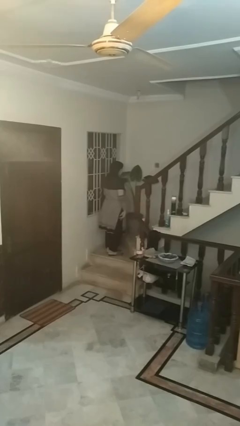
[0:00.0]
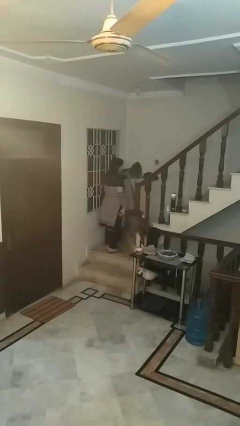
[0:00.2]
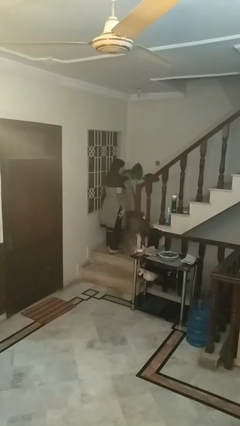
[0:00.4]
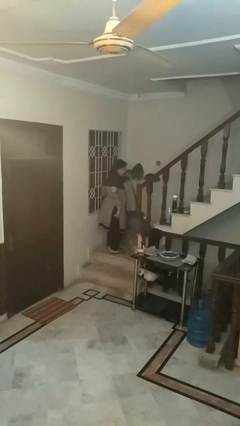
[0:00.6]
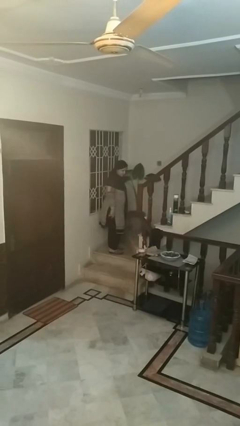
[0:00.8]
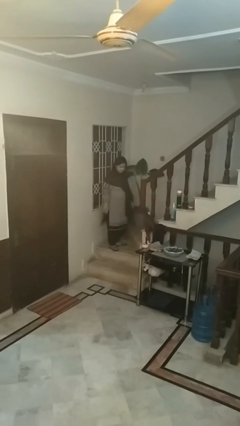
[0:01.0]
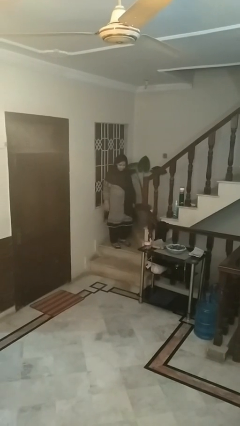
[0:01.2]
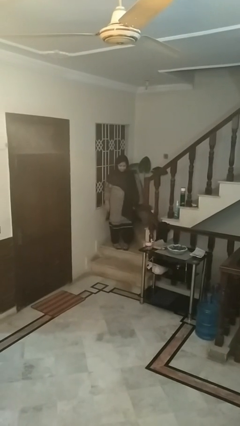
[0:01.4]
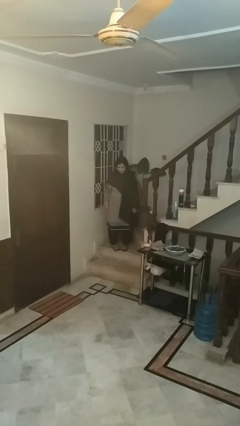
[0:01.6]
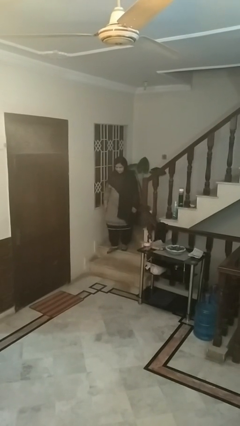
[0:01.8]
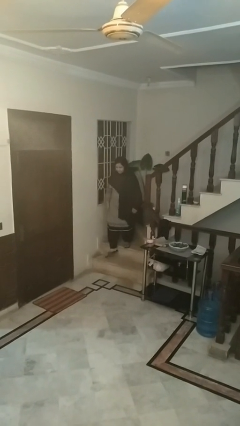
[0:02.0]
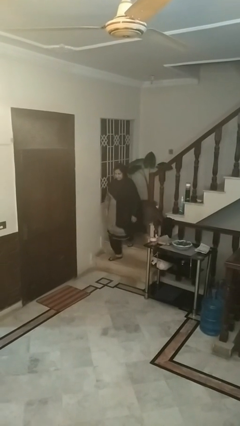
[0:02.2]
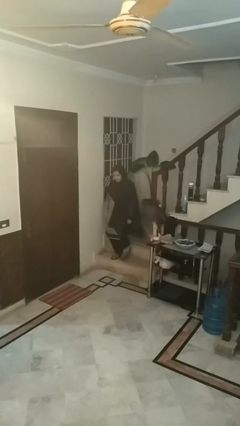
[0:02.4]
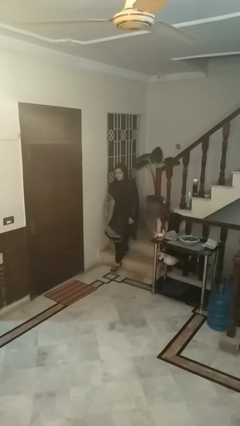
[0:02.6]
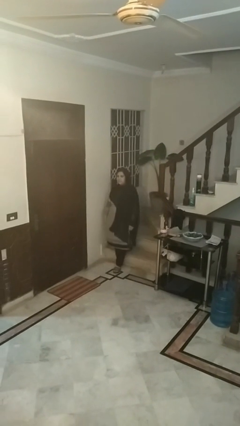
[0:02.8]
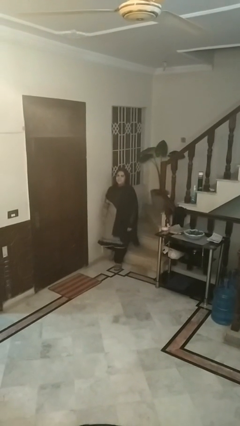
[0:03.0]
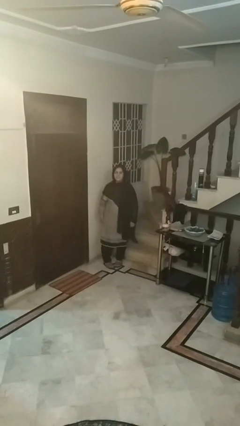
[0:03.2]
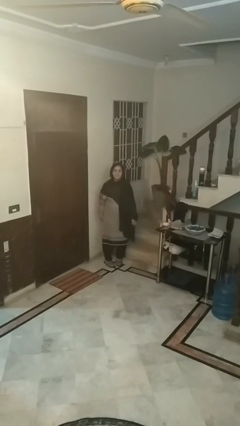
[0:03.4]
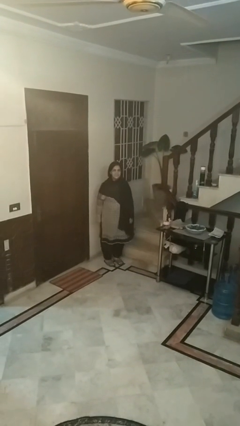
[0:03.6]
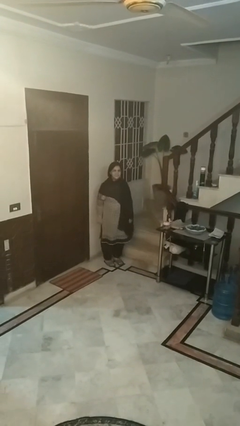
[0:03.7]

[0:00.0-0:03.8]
person climbs down stairs

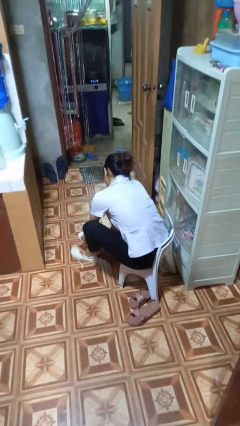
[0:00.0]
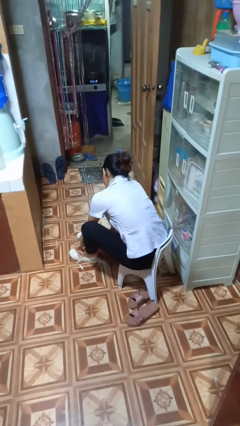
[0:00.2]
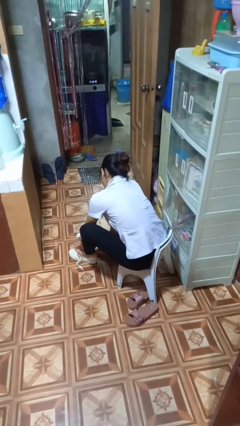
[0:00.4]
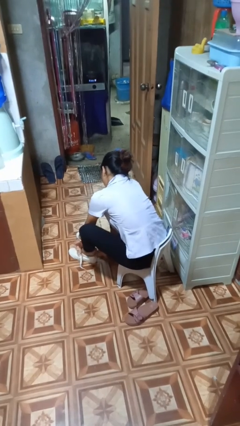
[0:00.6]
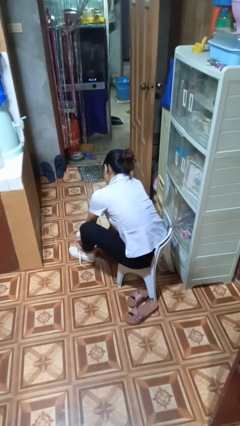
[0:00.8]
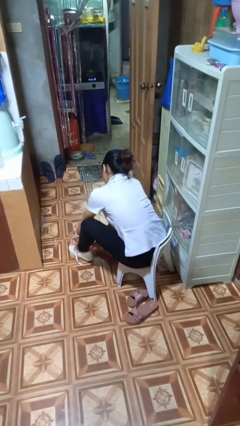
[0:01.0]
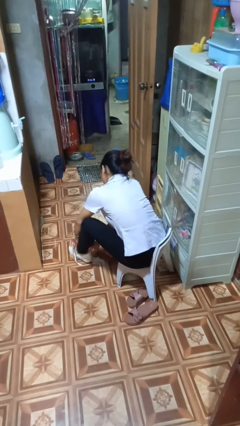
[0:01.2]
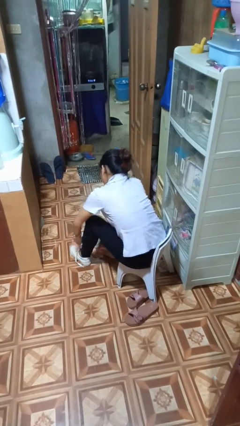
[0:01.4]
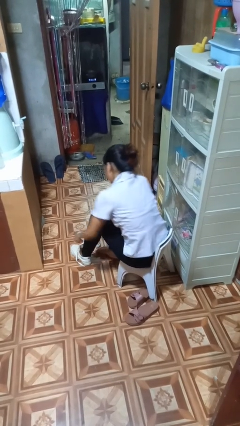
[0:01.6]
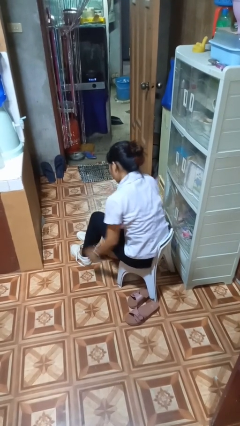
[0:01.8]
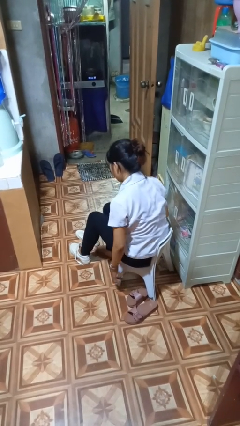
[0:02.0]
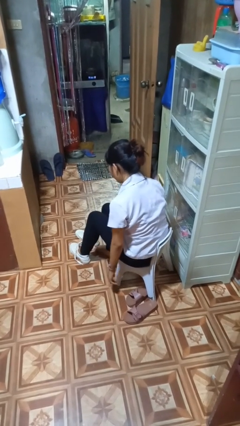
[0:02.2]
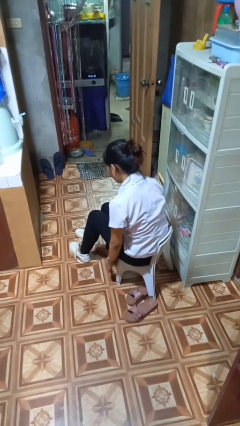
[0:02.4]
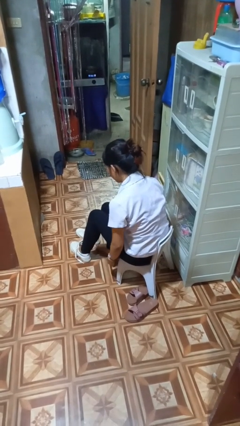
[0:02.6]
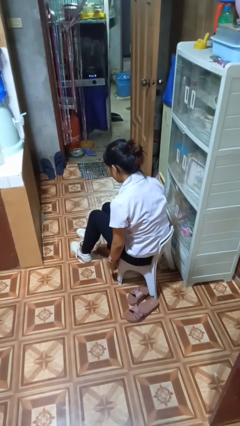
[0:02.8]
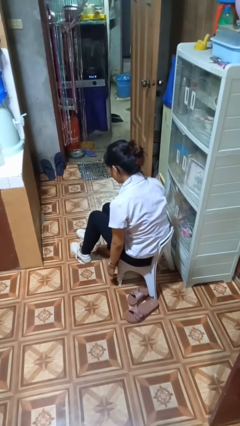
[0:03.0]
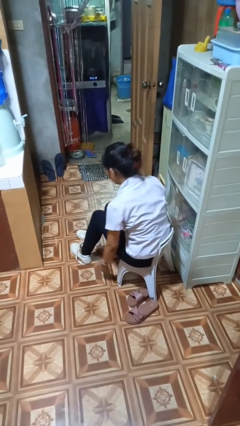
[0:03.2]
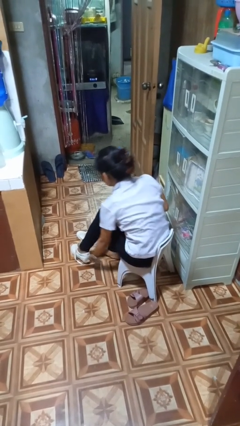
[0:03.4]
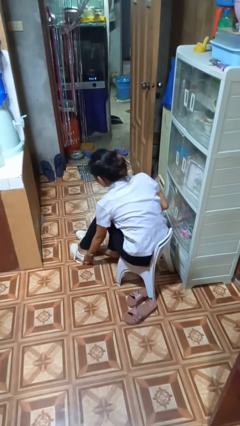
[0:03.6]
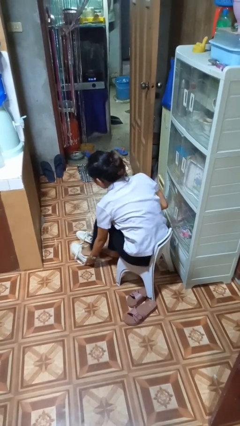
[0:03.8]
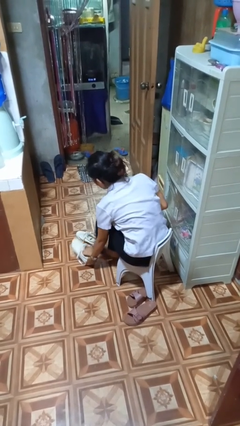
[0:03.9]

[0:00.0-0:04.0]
person puts on shoes

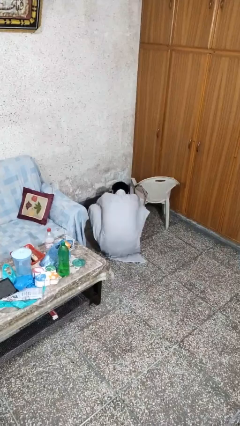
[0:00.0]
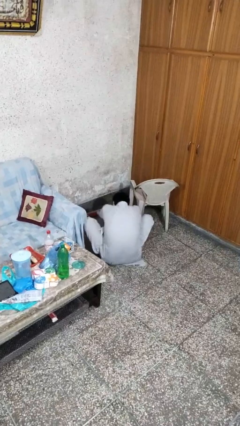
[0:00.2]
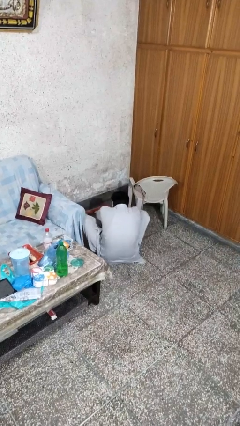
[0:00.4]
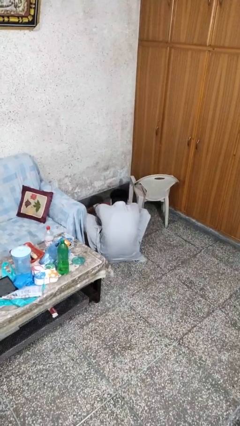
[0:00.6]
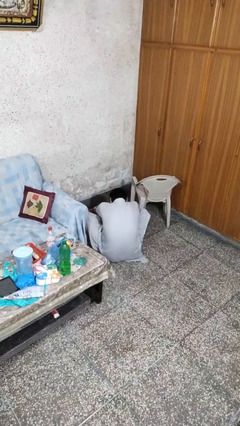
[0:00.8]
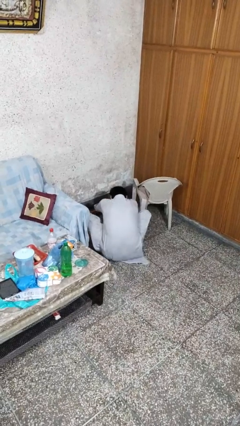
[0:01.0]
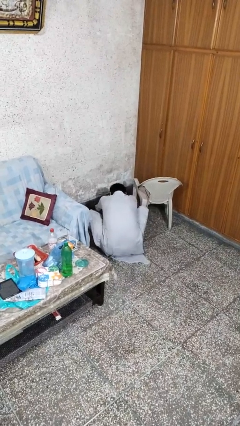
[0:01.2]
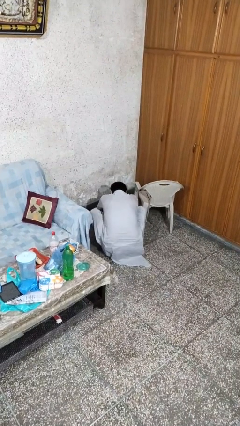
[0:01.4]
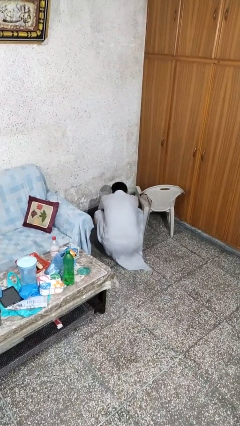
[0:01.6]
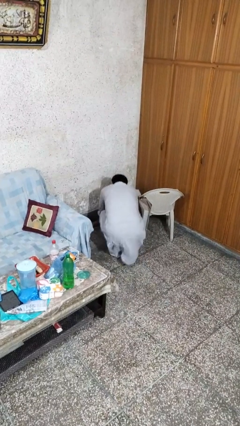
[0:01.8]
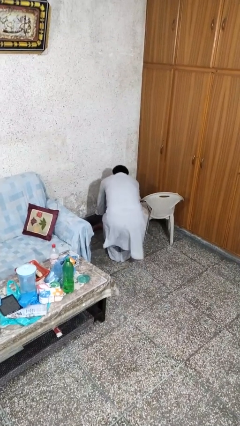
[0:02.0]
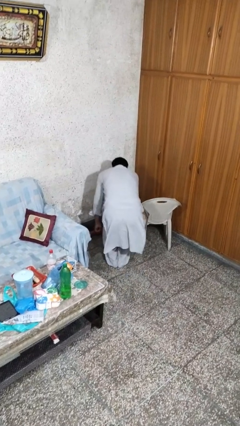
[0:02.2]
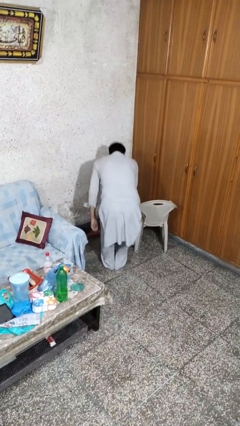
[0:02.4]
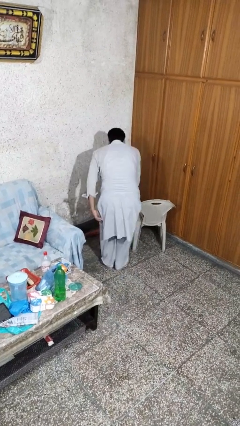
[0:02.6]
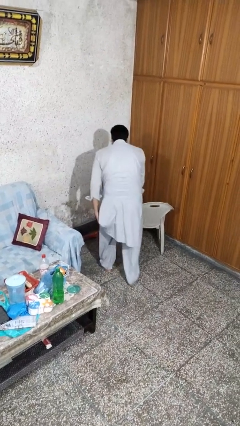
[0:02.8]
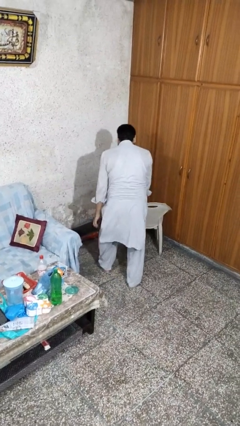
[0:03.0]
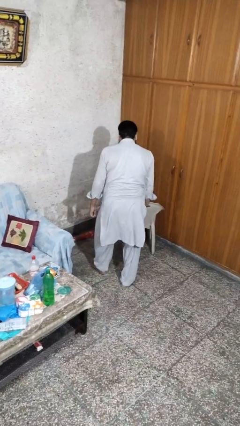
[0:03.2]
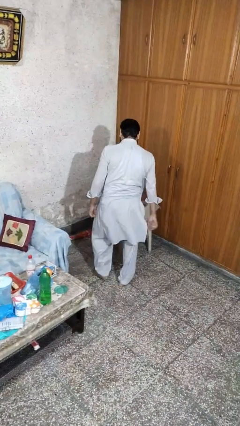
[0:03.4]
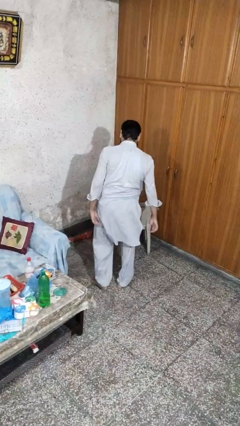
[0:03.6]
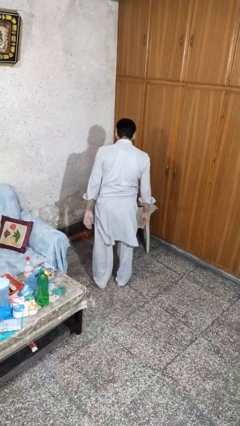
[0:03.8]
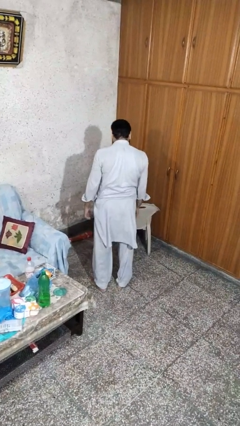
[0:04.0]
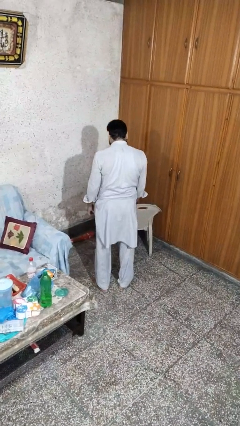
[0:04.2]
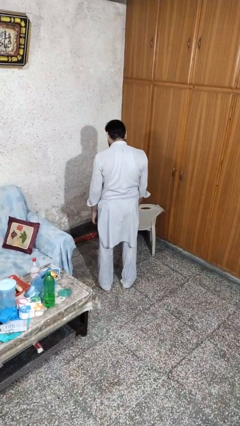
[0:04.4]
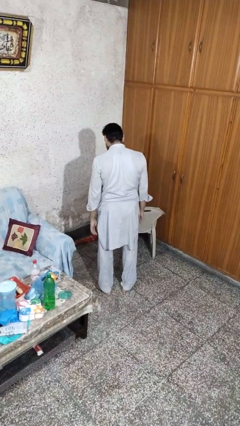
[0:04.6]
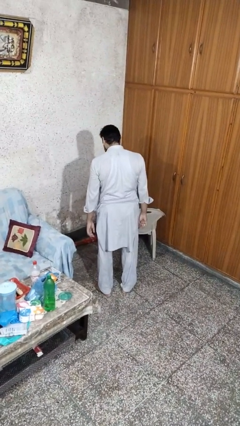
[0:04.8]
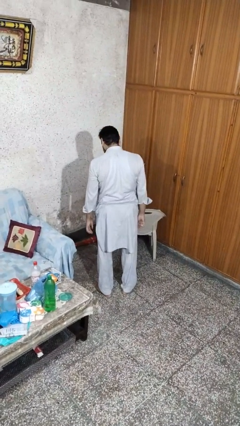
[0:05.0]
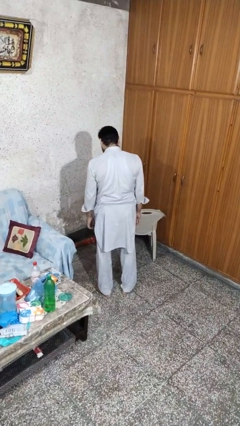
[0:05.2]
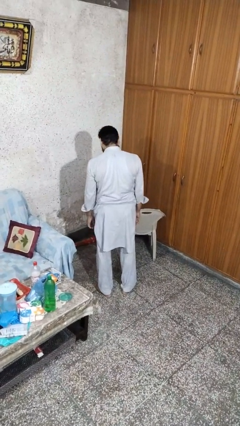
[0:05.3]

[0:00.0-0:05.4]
person stands up from floor

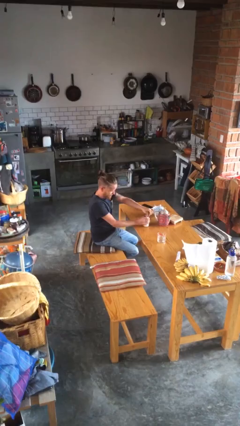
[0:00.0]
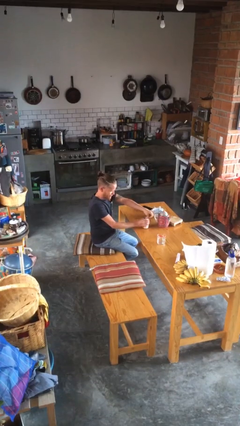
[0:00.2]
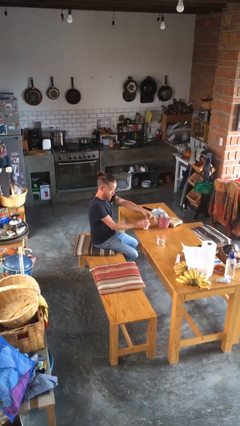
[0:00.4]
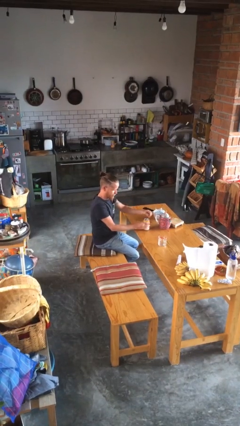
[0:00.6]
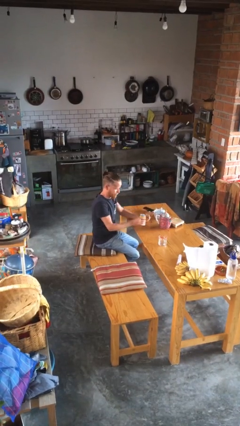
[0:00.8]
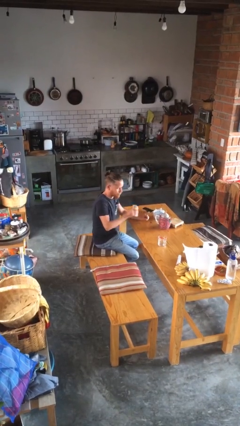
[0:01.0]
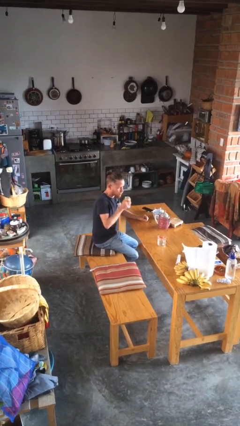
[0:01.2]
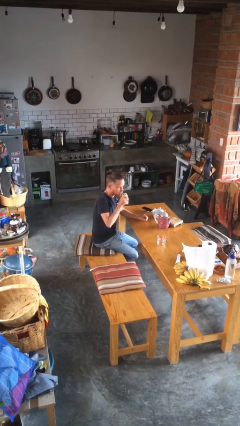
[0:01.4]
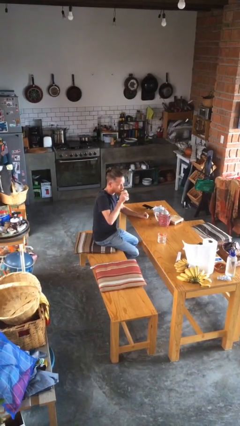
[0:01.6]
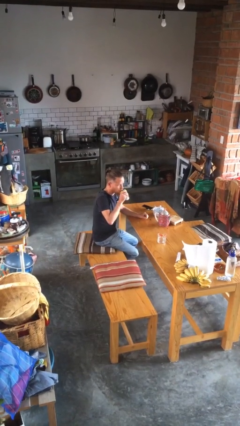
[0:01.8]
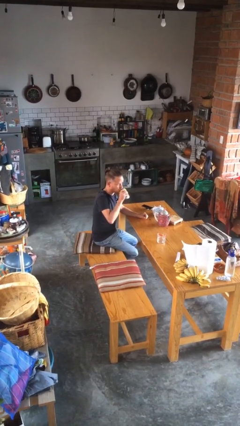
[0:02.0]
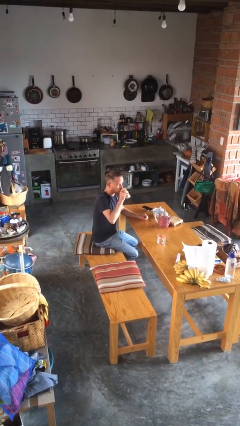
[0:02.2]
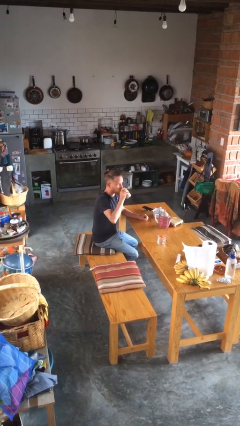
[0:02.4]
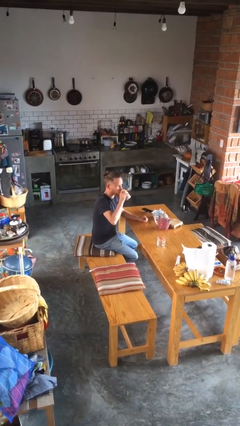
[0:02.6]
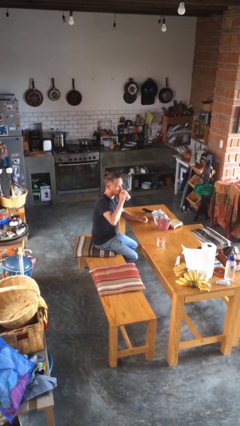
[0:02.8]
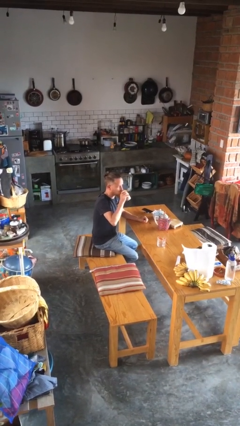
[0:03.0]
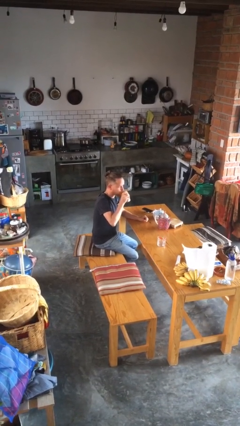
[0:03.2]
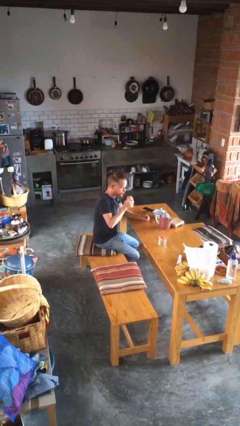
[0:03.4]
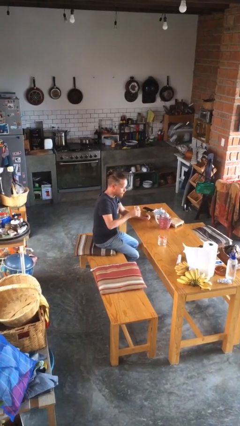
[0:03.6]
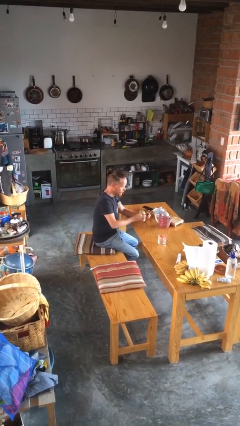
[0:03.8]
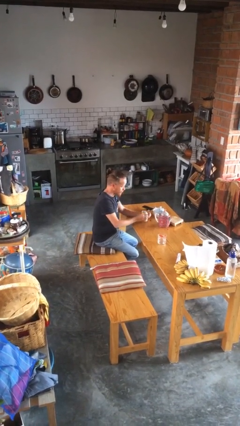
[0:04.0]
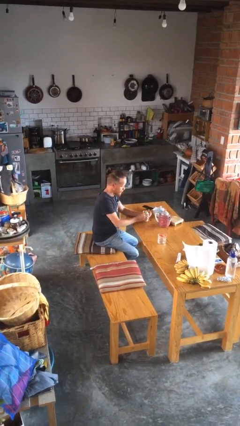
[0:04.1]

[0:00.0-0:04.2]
person drinks from beverage can
